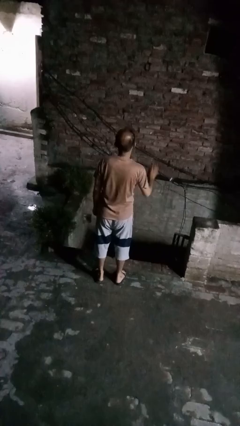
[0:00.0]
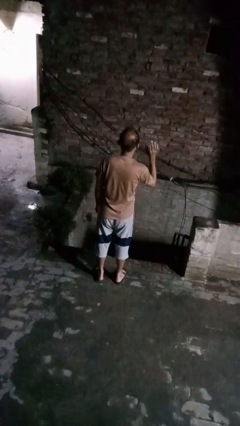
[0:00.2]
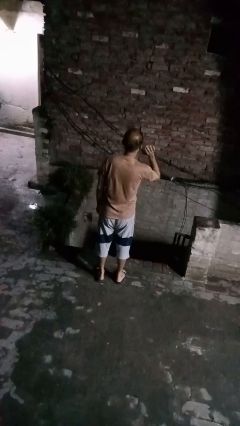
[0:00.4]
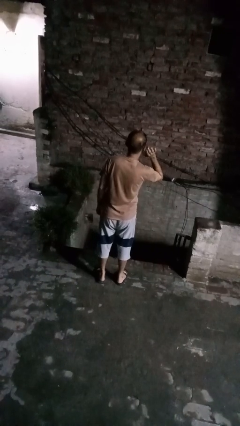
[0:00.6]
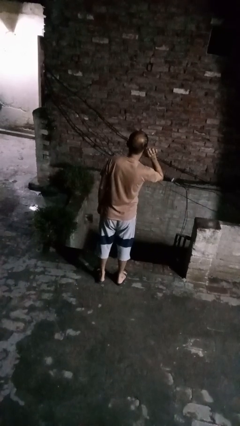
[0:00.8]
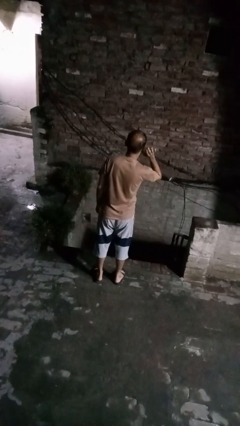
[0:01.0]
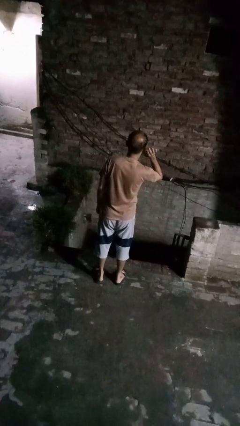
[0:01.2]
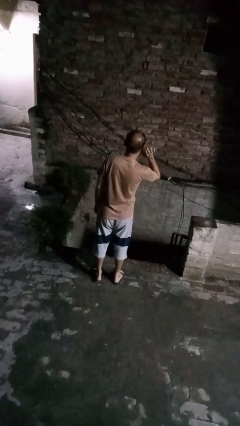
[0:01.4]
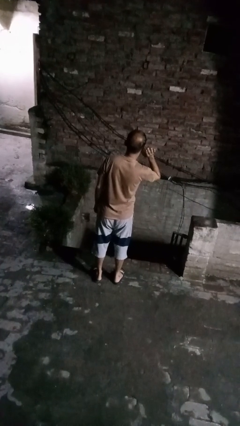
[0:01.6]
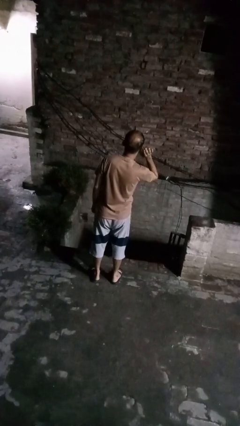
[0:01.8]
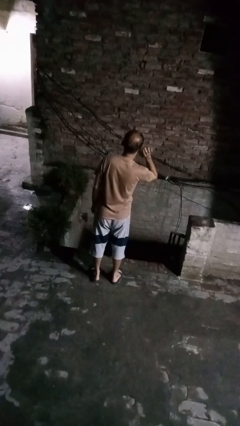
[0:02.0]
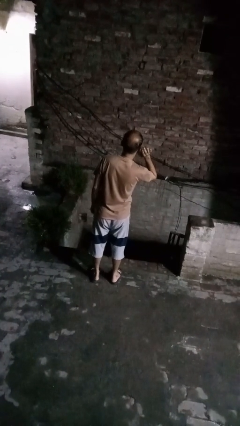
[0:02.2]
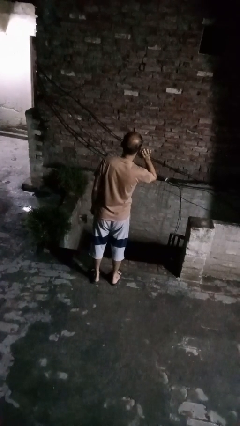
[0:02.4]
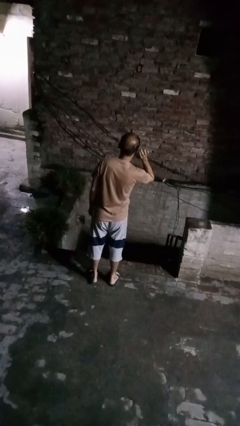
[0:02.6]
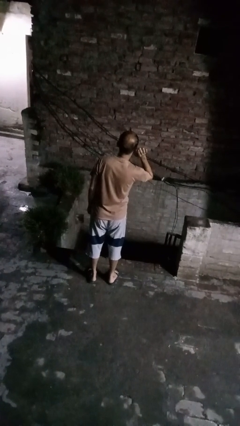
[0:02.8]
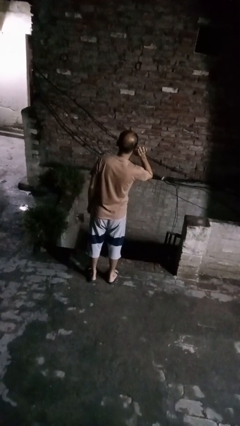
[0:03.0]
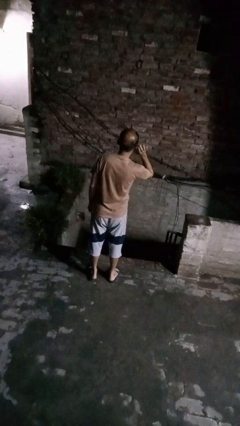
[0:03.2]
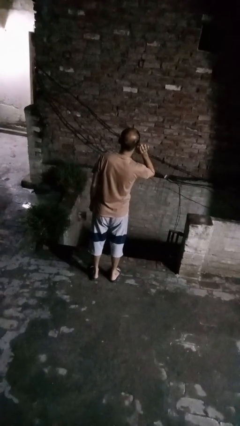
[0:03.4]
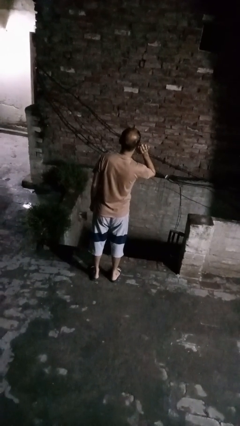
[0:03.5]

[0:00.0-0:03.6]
person gestures listen closely

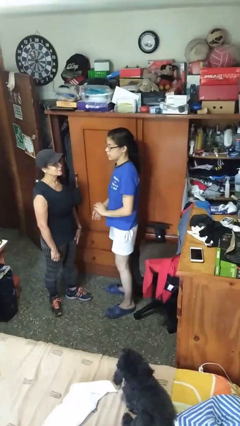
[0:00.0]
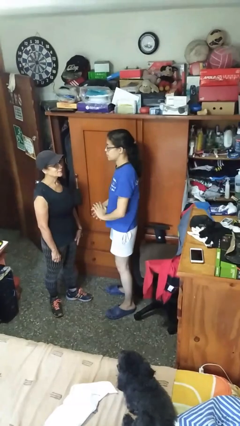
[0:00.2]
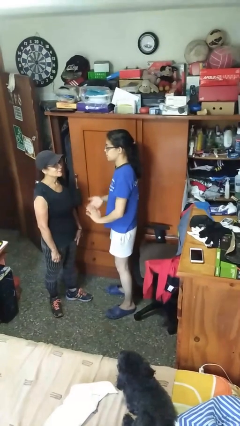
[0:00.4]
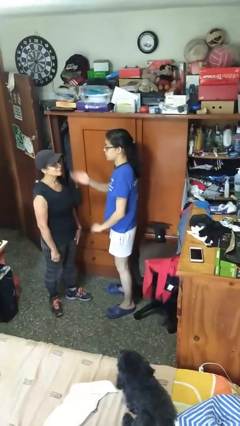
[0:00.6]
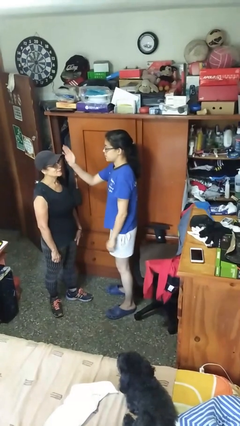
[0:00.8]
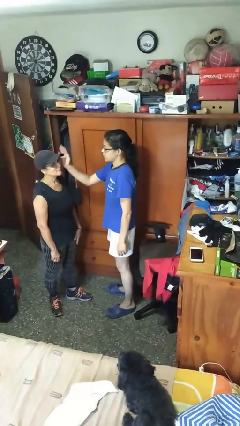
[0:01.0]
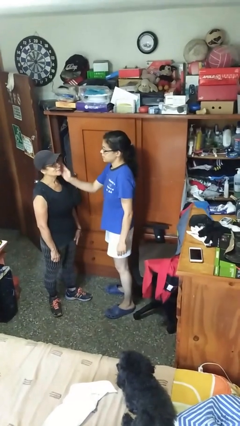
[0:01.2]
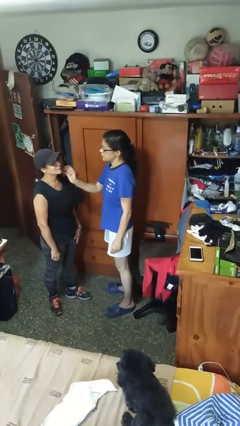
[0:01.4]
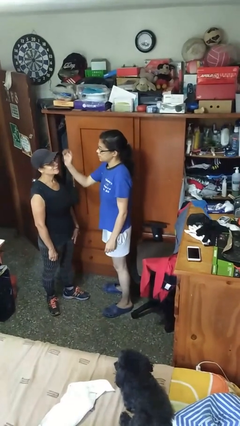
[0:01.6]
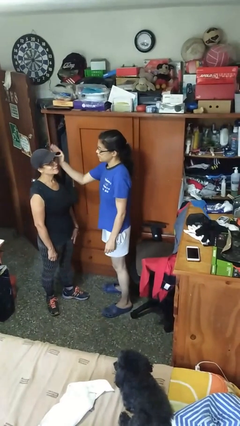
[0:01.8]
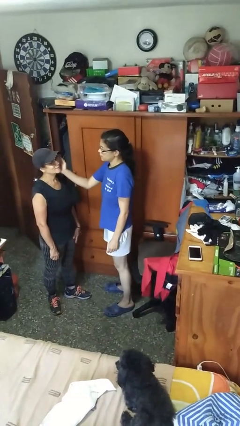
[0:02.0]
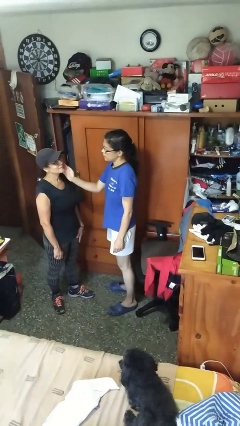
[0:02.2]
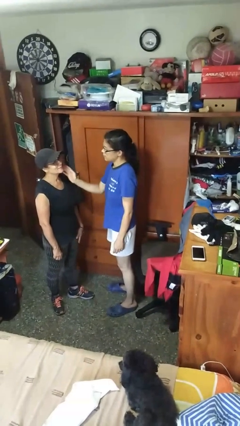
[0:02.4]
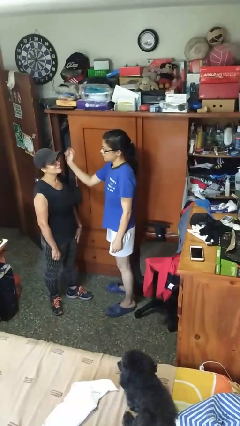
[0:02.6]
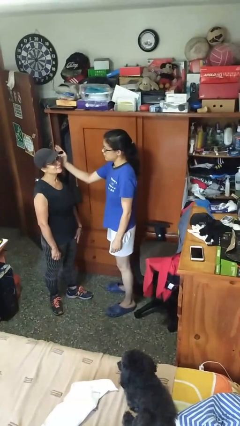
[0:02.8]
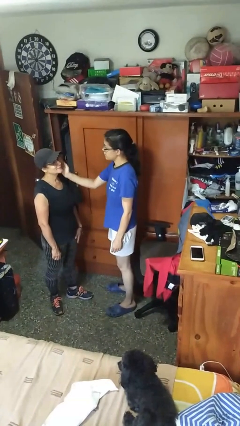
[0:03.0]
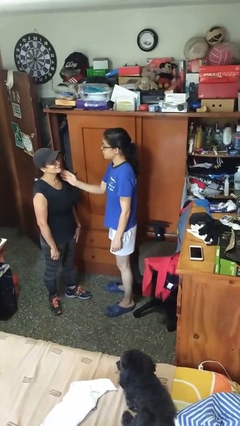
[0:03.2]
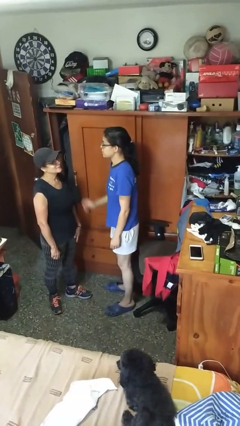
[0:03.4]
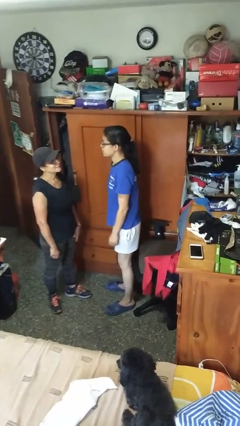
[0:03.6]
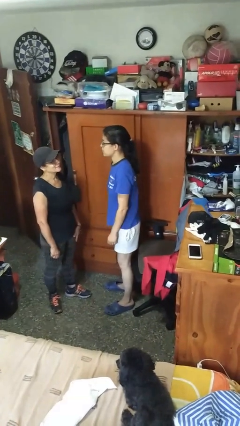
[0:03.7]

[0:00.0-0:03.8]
person touches face of person

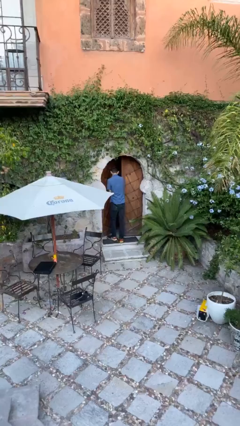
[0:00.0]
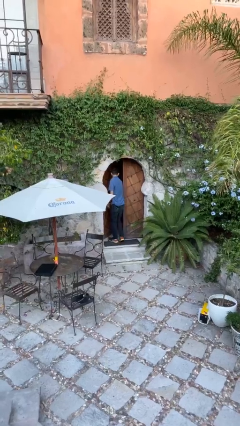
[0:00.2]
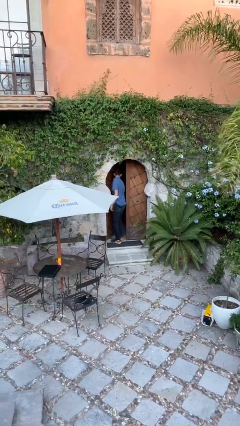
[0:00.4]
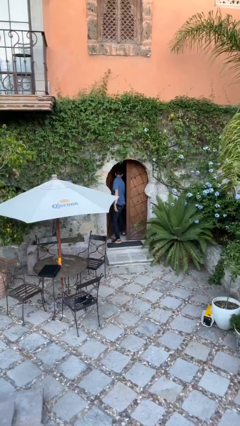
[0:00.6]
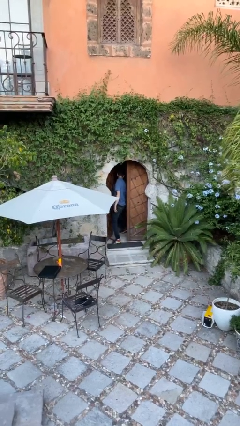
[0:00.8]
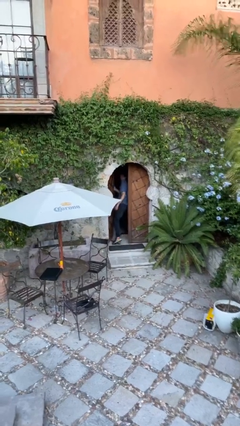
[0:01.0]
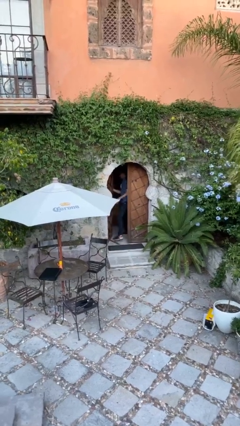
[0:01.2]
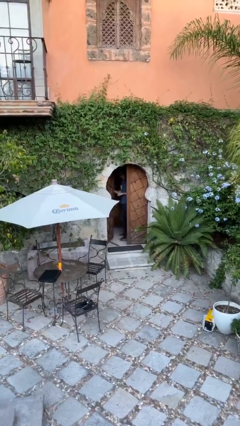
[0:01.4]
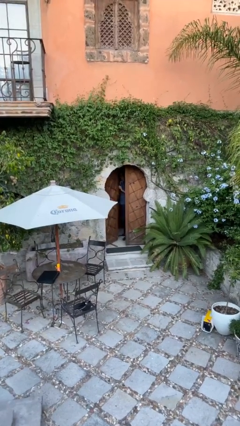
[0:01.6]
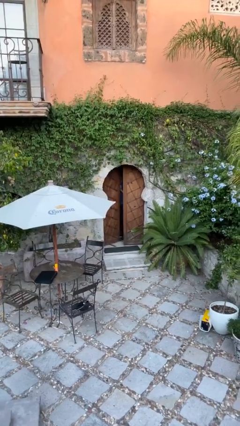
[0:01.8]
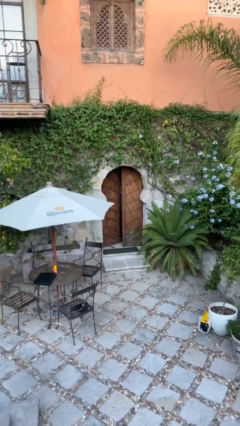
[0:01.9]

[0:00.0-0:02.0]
person exits scene through structure

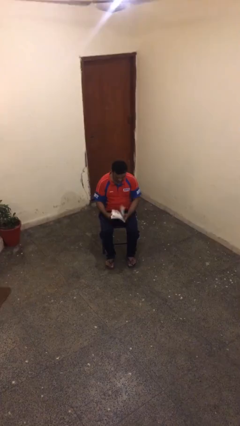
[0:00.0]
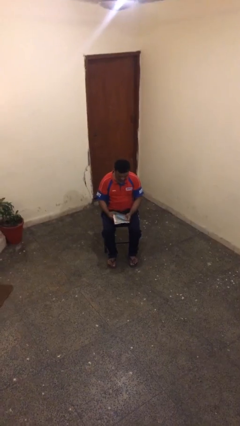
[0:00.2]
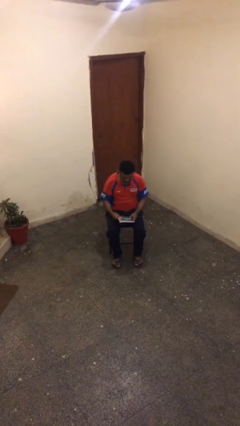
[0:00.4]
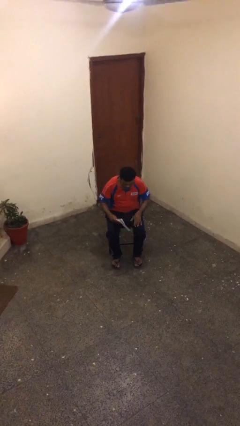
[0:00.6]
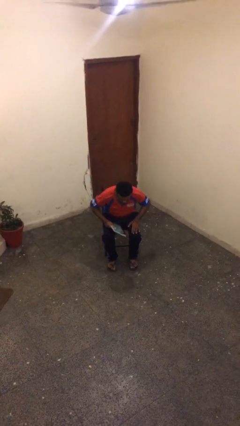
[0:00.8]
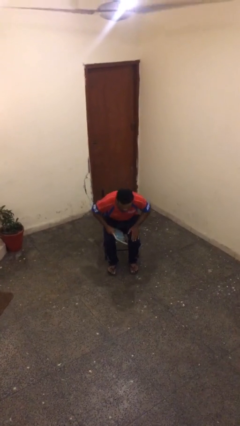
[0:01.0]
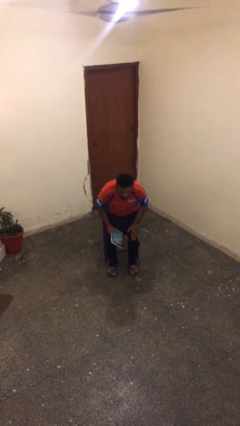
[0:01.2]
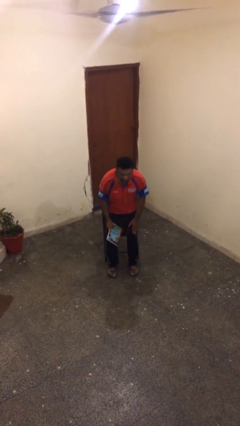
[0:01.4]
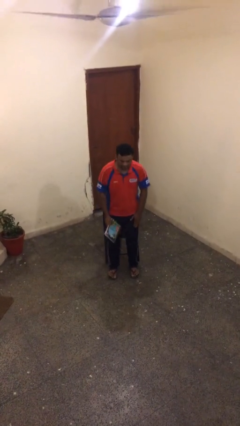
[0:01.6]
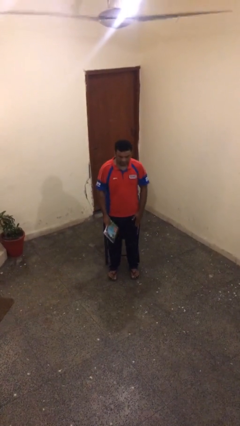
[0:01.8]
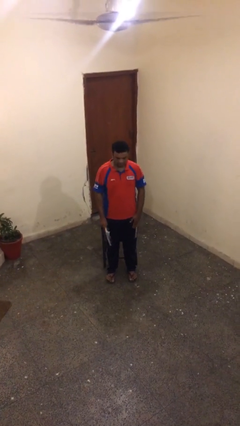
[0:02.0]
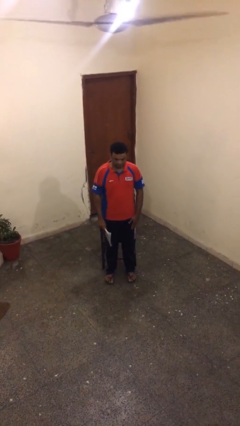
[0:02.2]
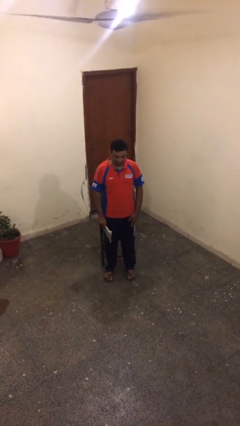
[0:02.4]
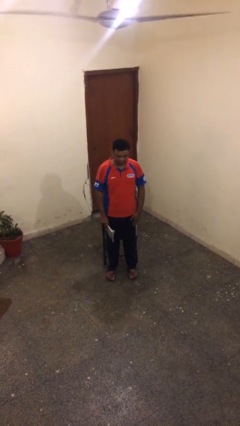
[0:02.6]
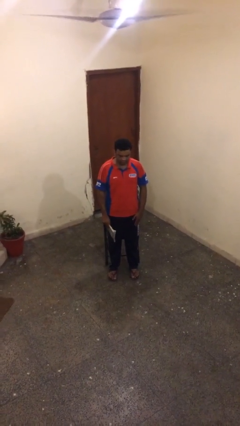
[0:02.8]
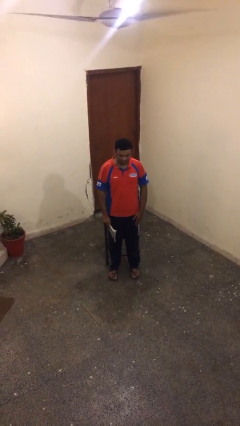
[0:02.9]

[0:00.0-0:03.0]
person stands up

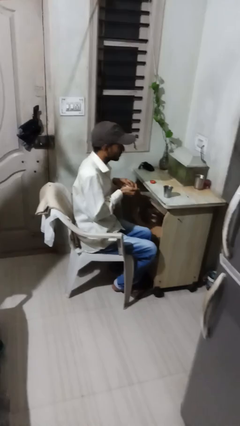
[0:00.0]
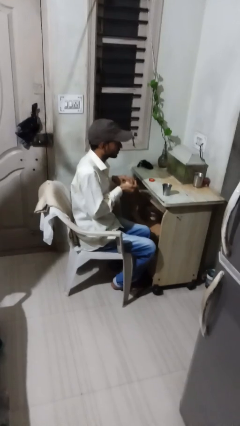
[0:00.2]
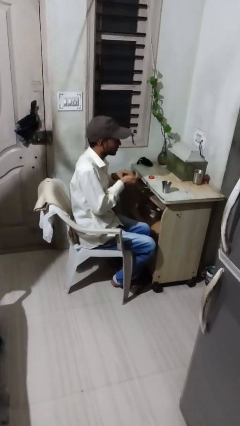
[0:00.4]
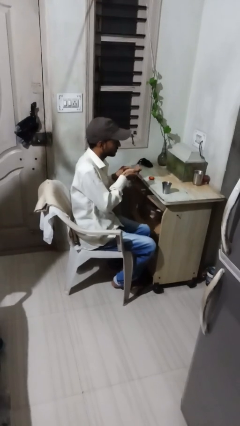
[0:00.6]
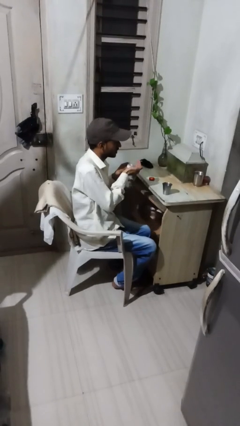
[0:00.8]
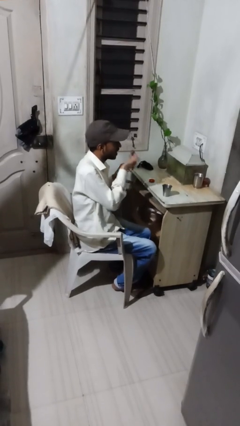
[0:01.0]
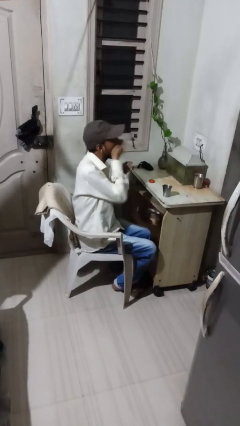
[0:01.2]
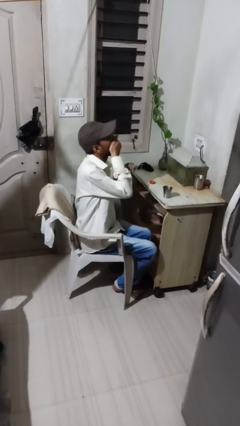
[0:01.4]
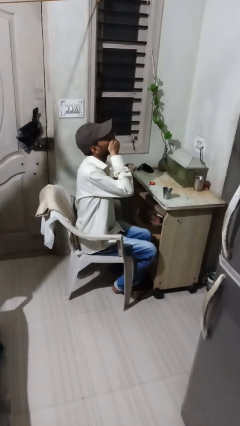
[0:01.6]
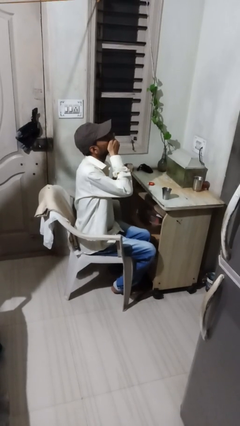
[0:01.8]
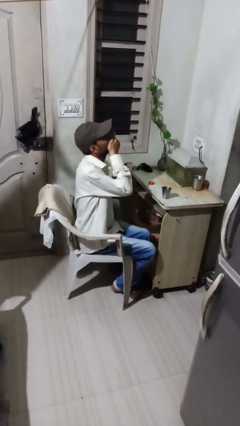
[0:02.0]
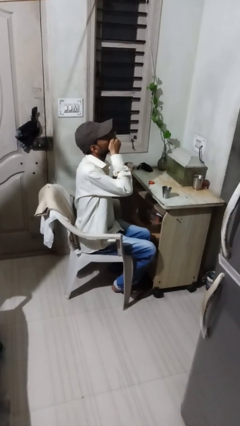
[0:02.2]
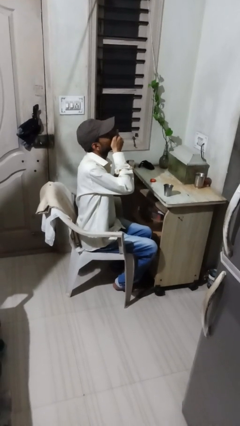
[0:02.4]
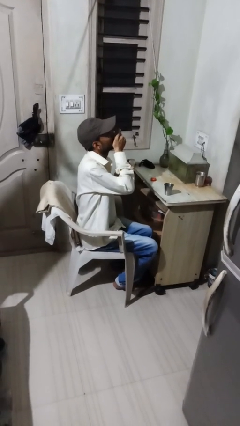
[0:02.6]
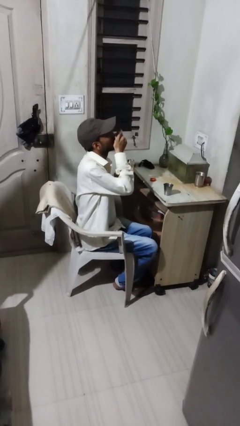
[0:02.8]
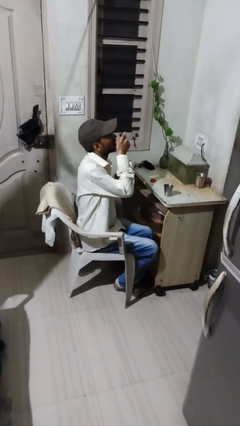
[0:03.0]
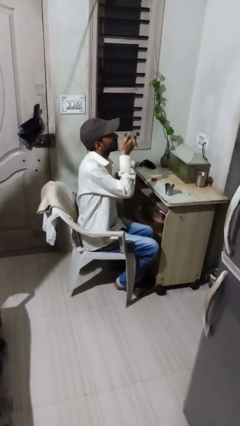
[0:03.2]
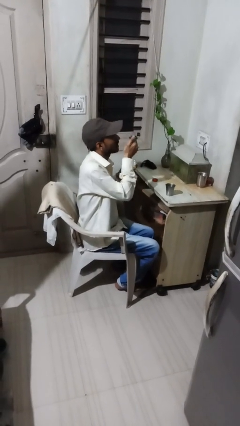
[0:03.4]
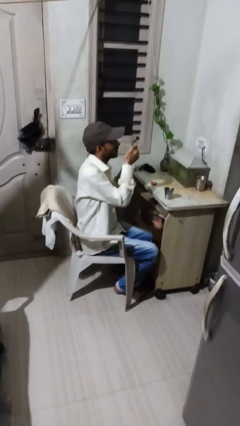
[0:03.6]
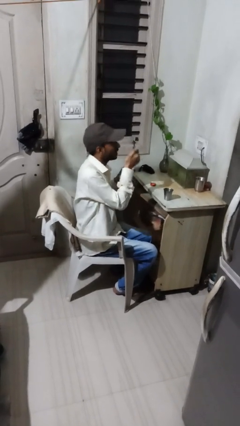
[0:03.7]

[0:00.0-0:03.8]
person takes medicine pills

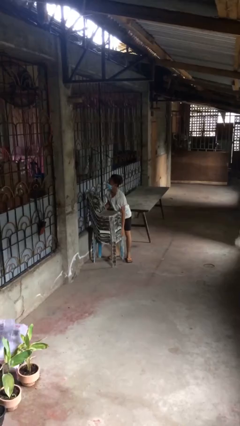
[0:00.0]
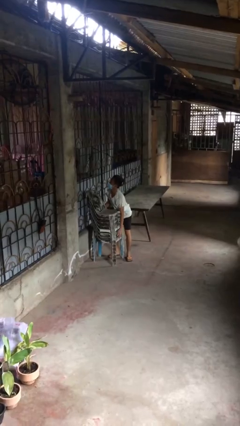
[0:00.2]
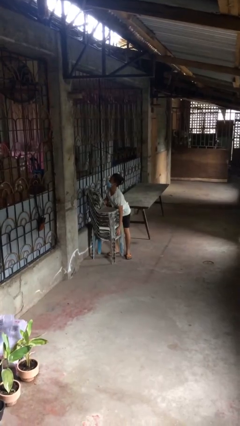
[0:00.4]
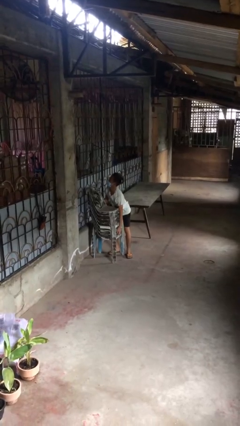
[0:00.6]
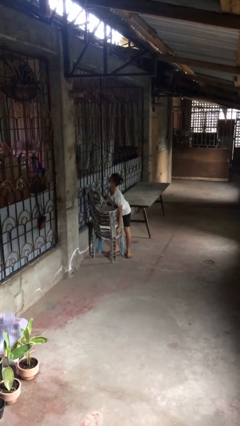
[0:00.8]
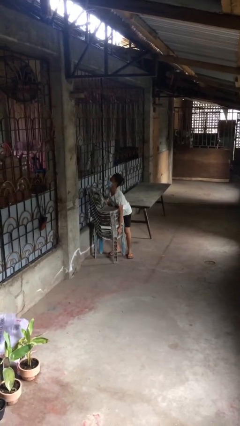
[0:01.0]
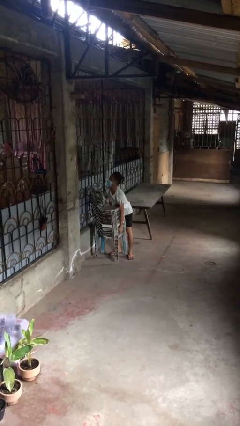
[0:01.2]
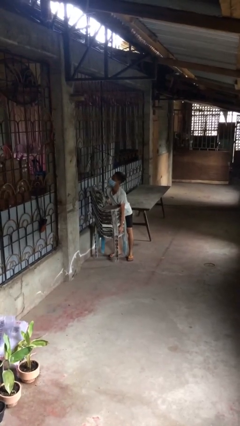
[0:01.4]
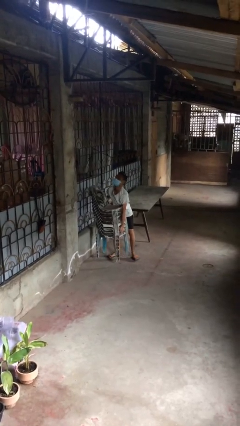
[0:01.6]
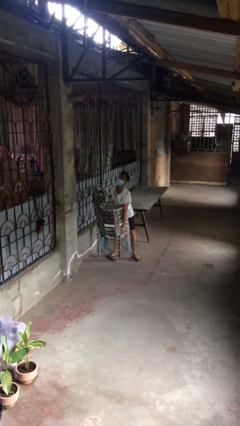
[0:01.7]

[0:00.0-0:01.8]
person picks up object from floor
